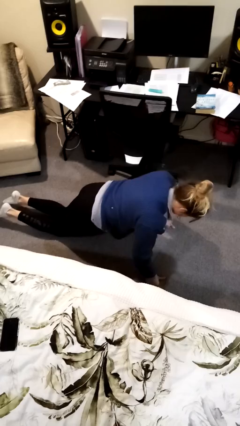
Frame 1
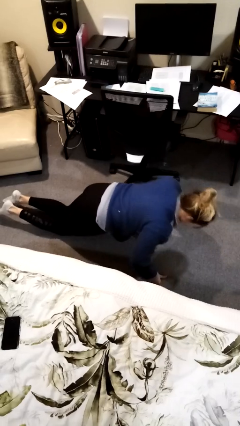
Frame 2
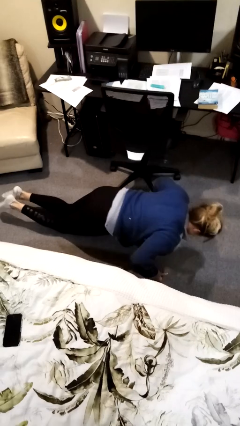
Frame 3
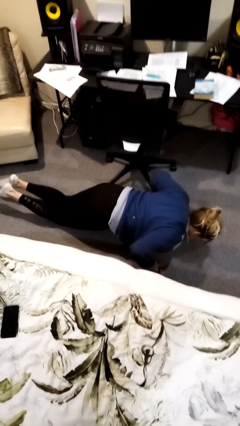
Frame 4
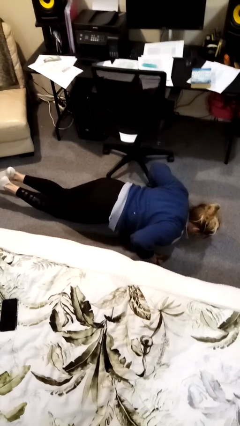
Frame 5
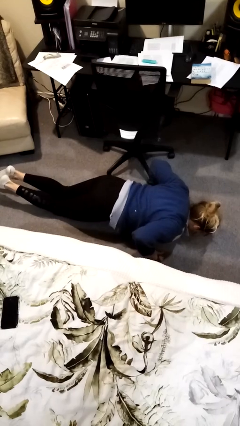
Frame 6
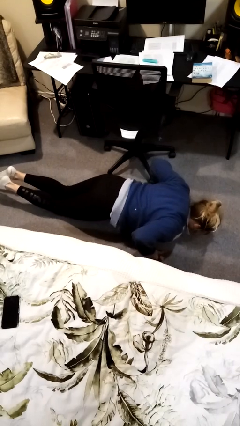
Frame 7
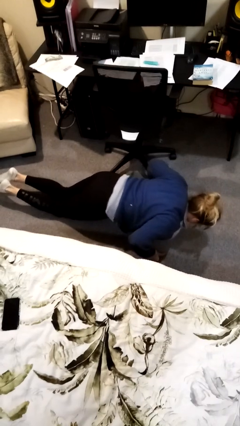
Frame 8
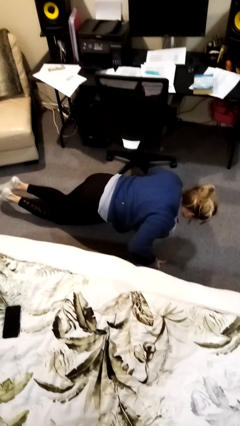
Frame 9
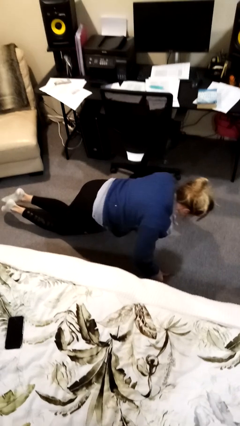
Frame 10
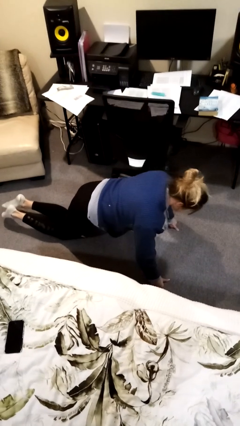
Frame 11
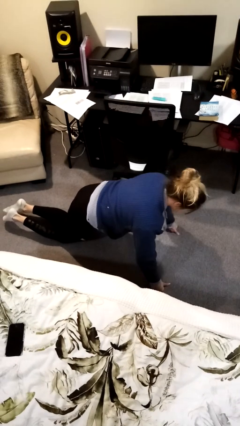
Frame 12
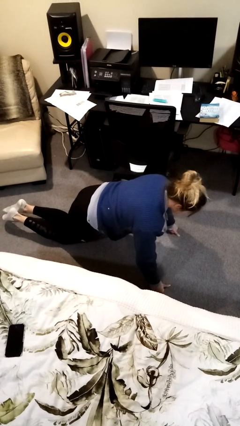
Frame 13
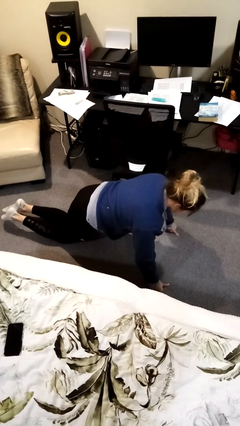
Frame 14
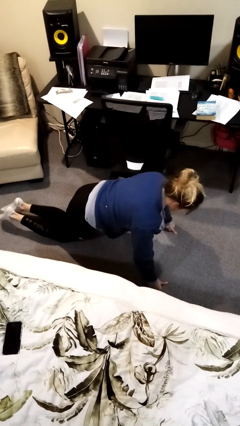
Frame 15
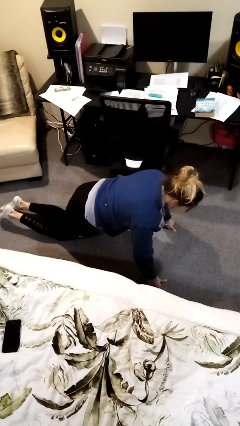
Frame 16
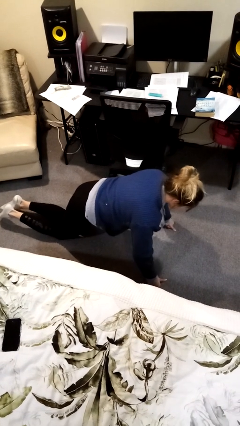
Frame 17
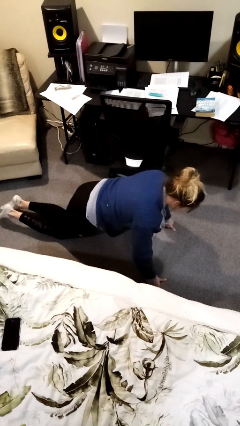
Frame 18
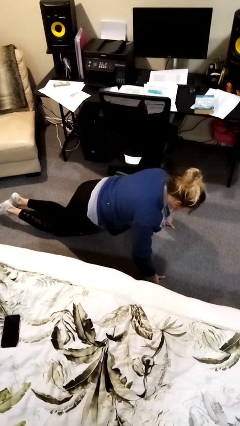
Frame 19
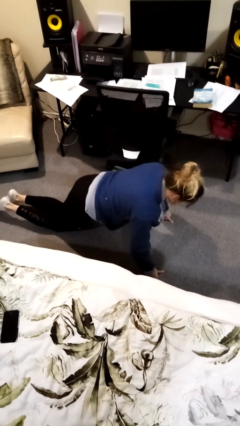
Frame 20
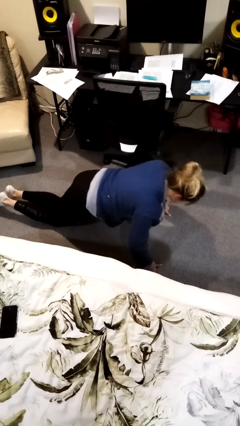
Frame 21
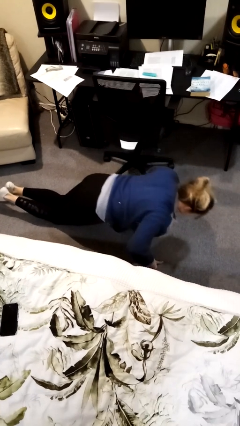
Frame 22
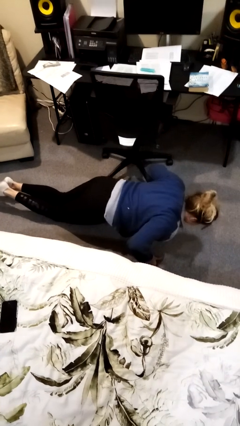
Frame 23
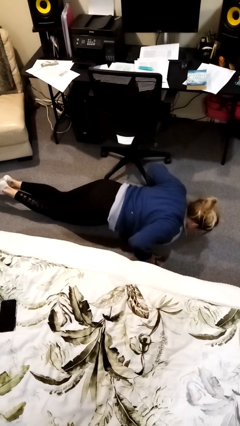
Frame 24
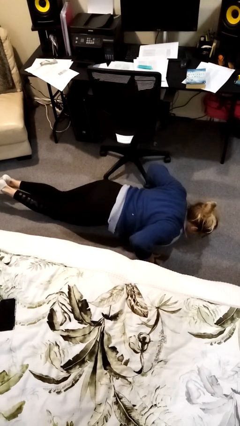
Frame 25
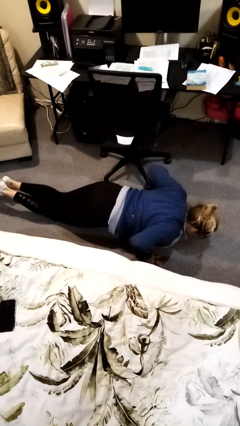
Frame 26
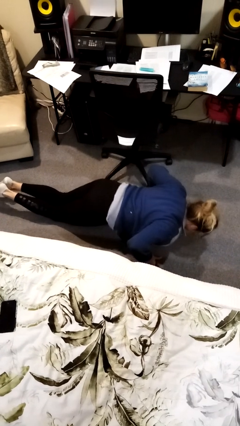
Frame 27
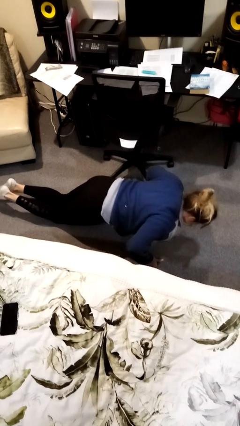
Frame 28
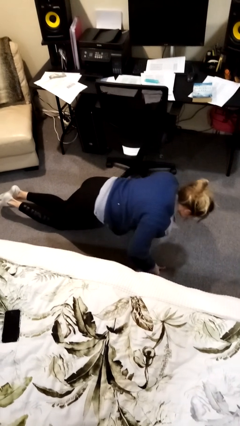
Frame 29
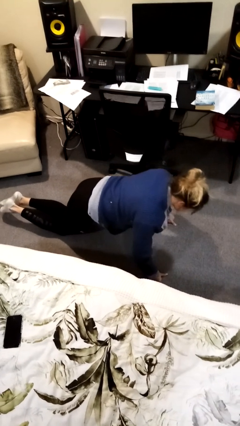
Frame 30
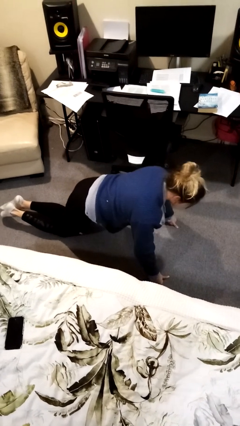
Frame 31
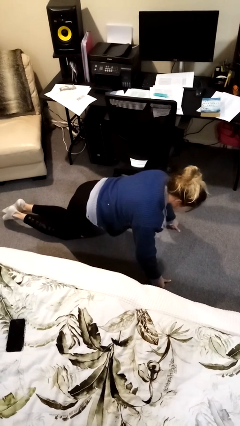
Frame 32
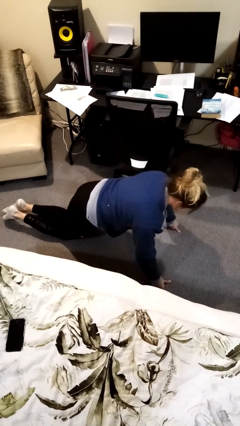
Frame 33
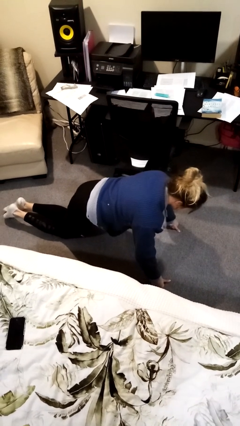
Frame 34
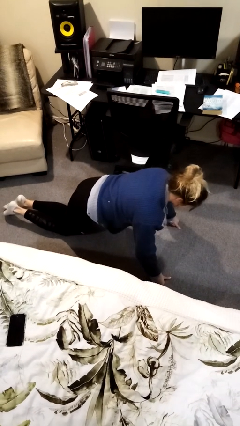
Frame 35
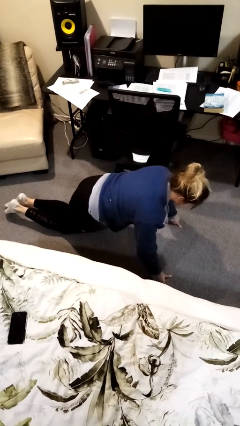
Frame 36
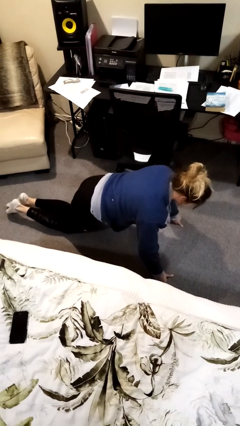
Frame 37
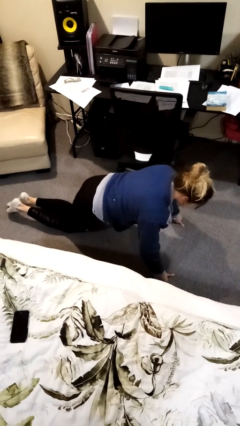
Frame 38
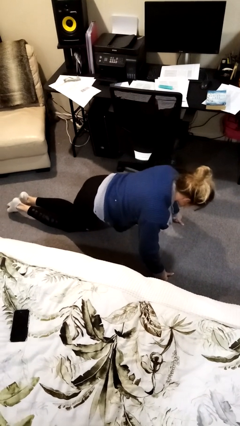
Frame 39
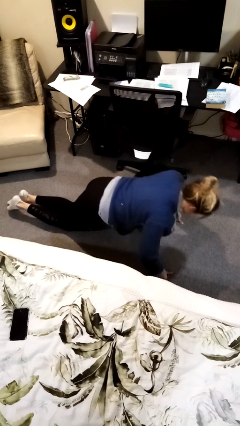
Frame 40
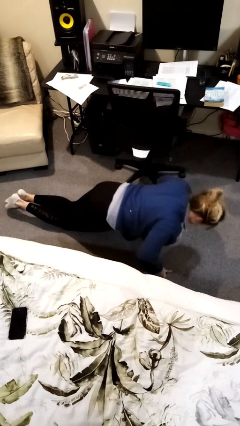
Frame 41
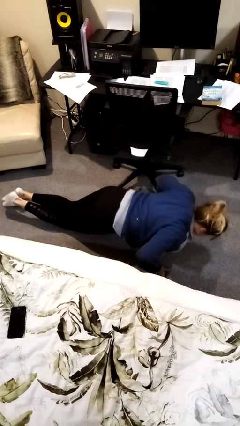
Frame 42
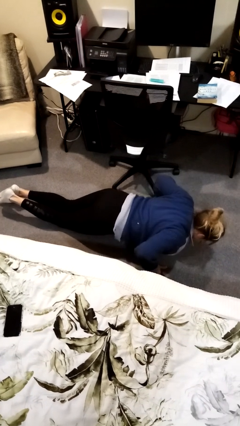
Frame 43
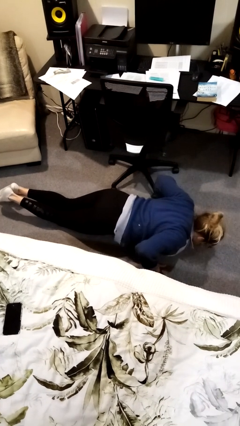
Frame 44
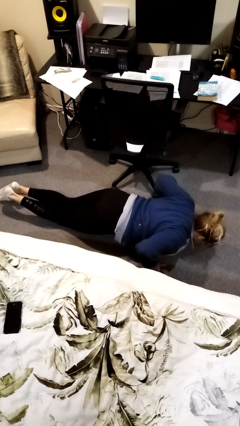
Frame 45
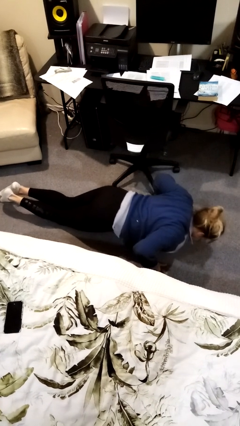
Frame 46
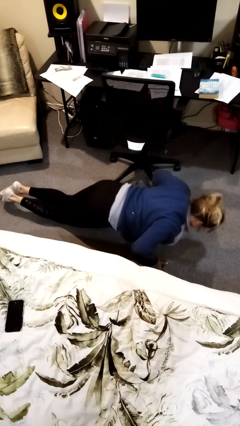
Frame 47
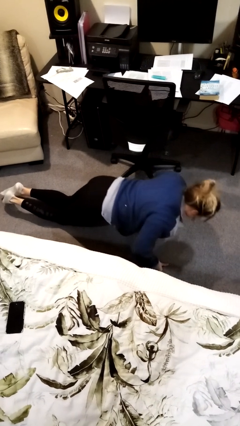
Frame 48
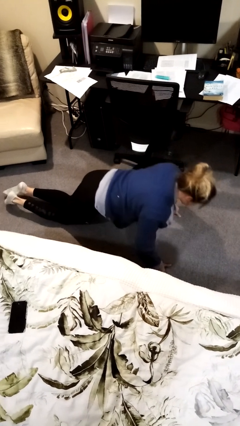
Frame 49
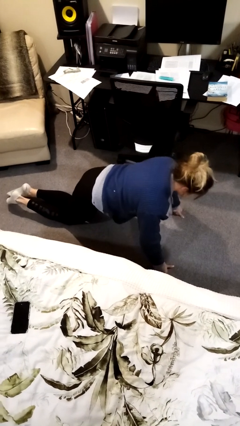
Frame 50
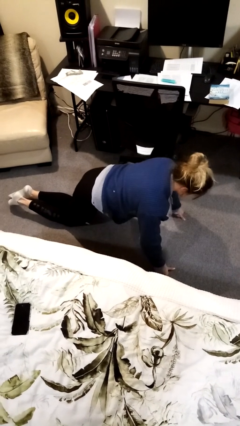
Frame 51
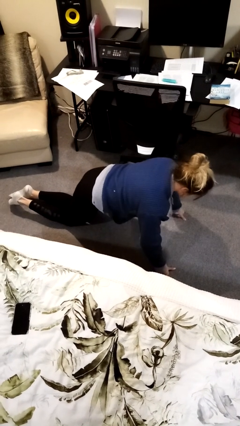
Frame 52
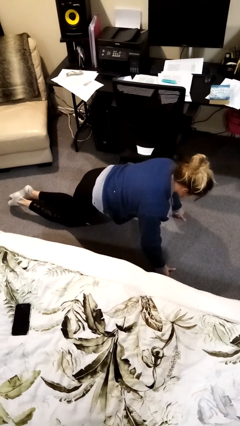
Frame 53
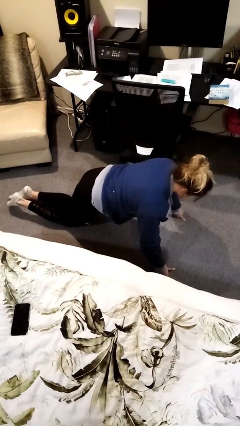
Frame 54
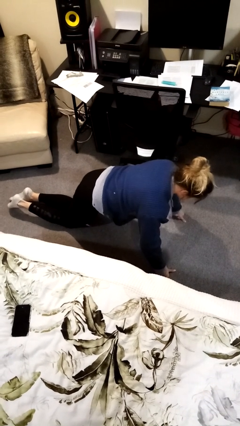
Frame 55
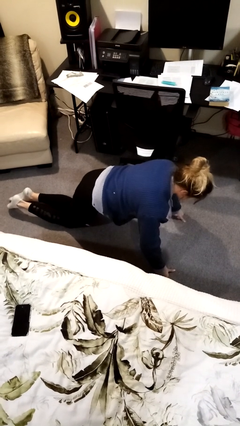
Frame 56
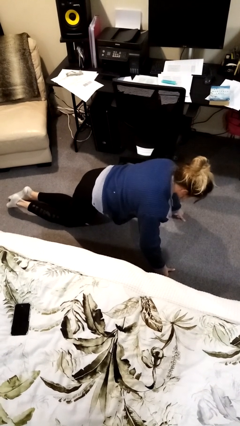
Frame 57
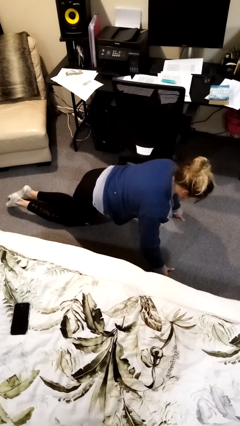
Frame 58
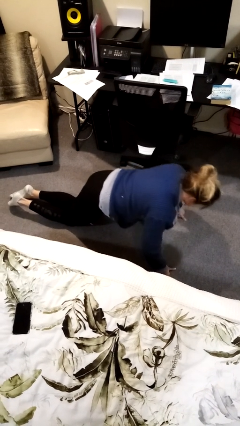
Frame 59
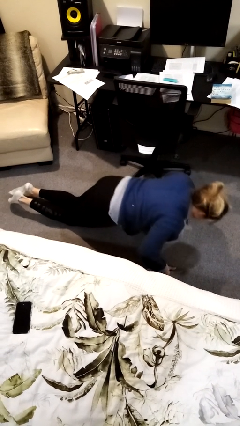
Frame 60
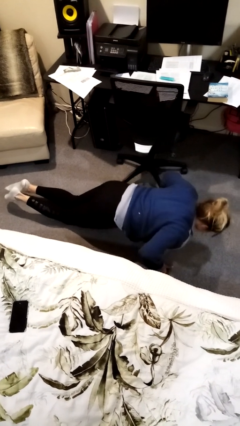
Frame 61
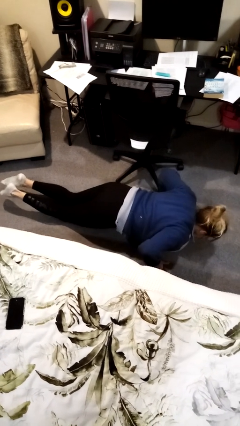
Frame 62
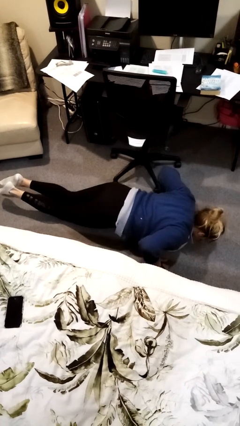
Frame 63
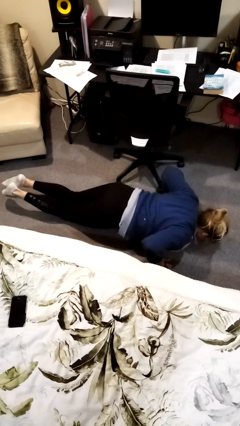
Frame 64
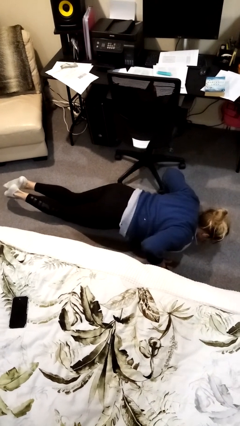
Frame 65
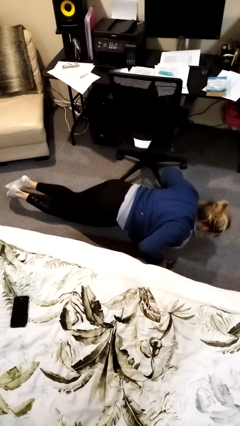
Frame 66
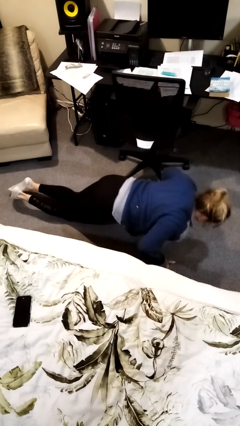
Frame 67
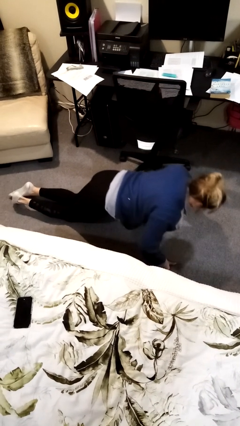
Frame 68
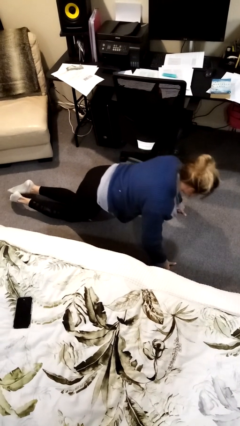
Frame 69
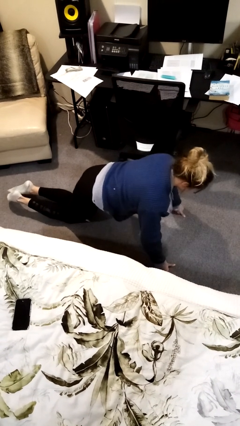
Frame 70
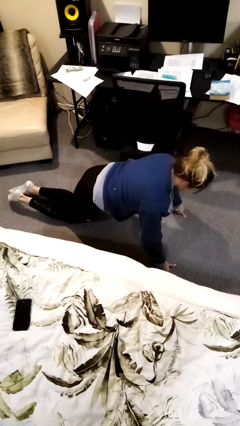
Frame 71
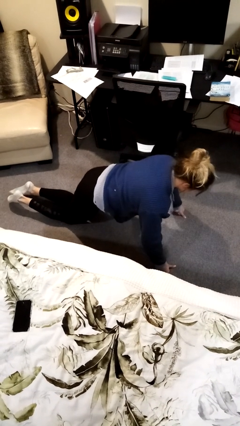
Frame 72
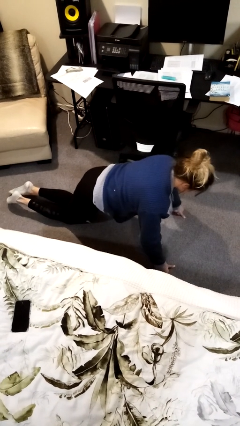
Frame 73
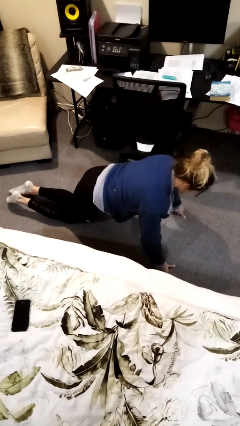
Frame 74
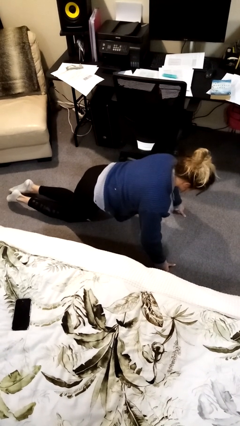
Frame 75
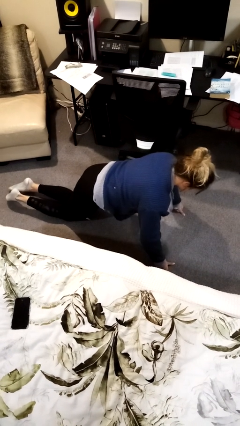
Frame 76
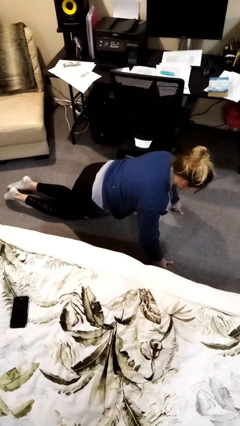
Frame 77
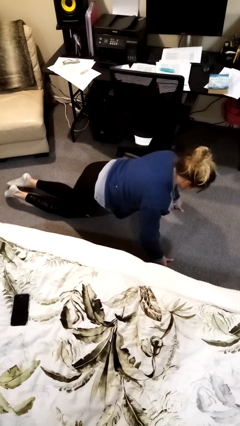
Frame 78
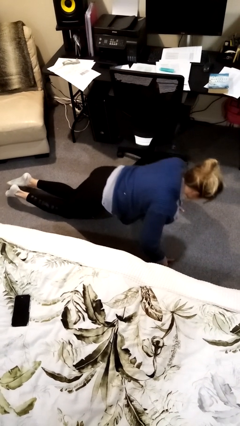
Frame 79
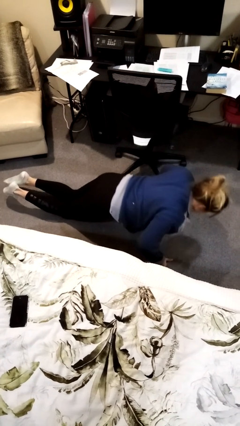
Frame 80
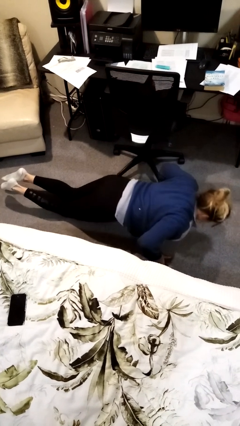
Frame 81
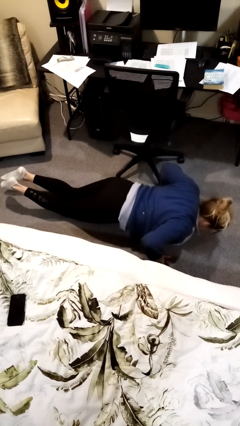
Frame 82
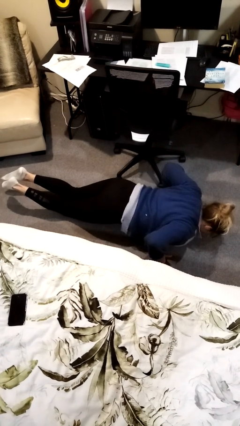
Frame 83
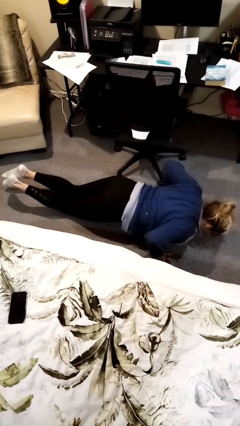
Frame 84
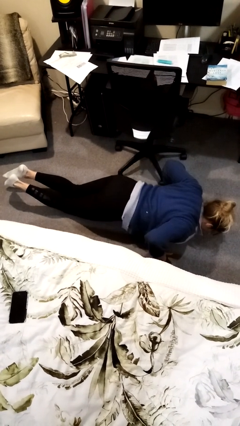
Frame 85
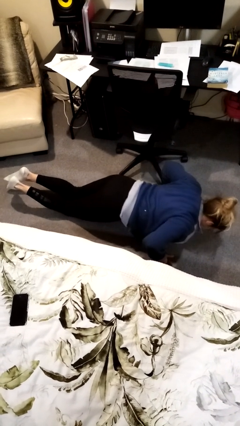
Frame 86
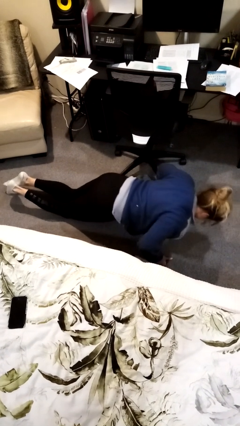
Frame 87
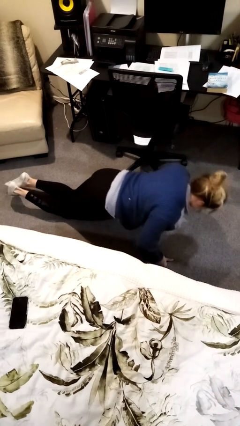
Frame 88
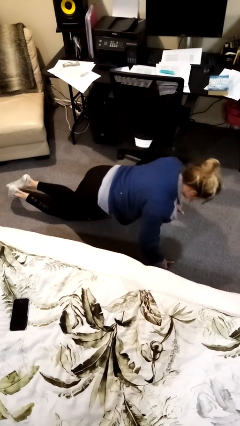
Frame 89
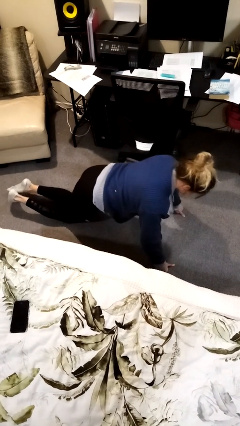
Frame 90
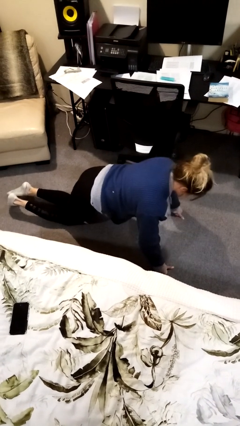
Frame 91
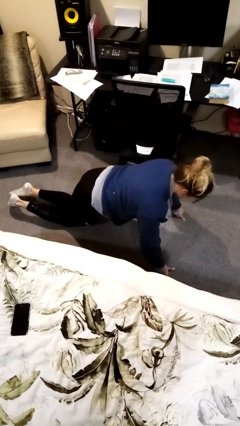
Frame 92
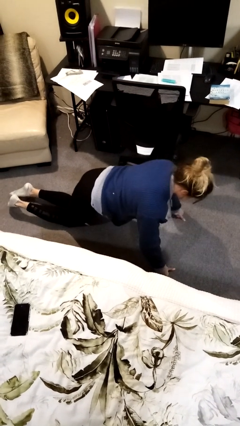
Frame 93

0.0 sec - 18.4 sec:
person exercises with pushup
